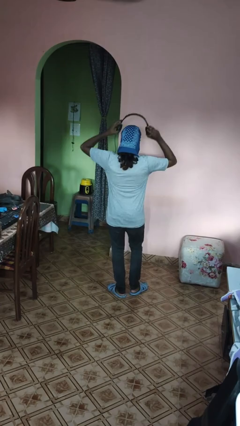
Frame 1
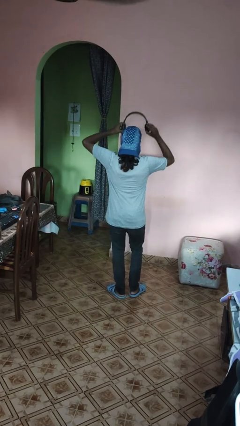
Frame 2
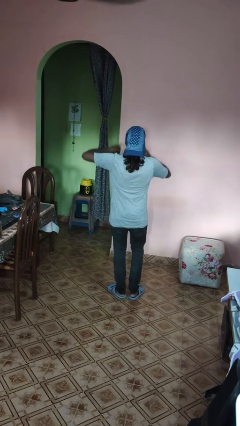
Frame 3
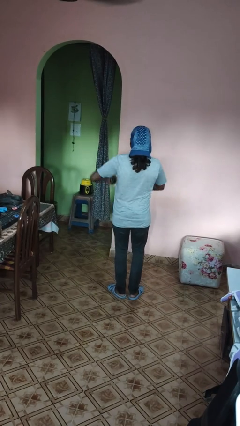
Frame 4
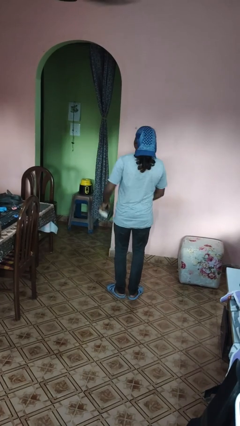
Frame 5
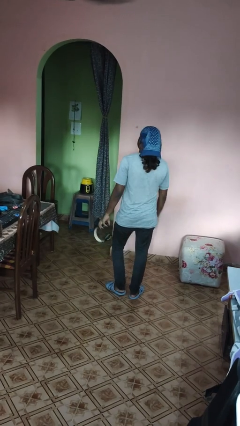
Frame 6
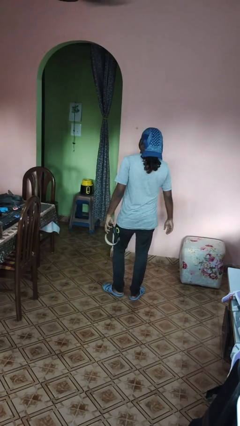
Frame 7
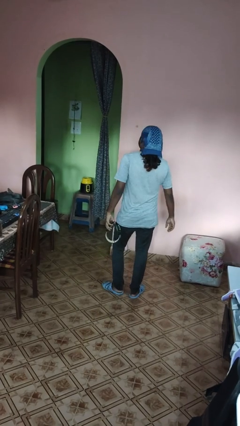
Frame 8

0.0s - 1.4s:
person takes off headphones

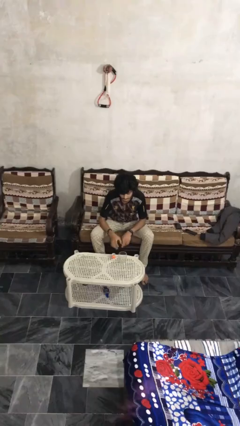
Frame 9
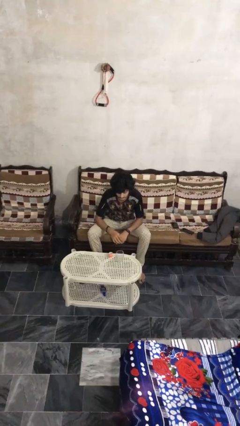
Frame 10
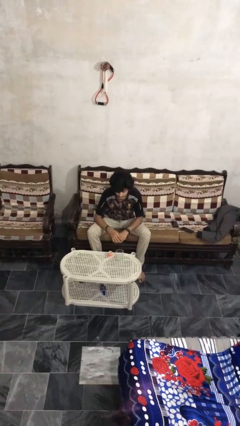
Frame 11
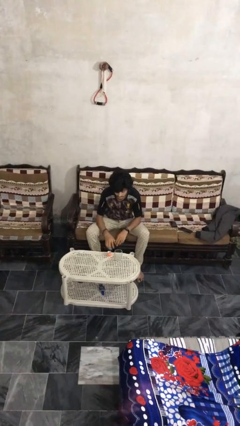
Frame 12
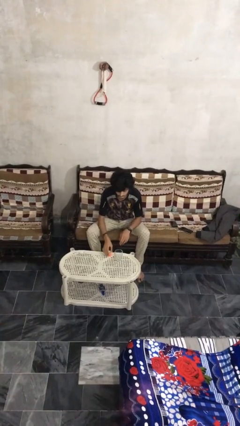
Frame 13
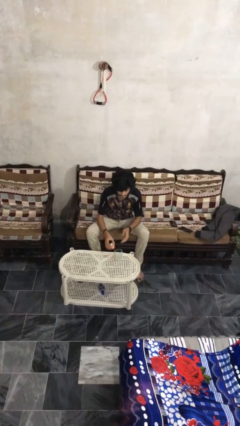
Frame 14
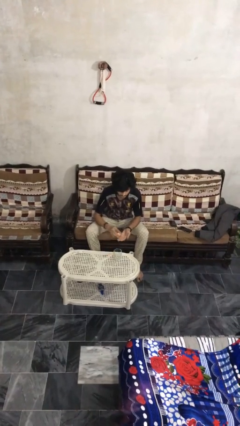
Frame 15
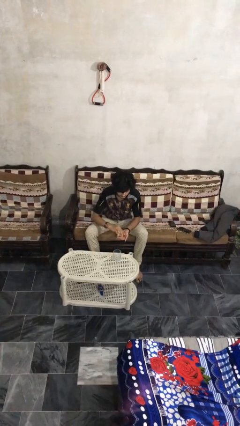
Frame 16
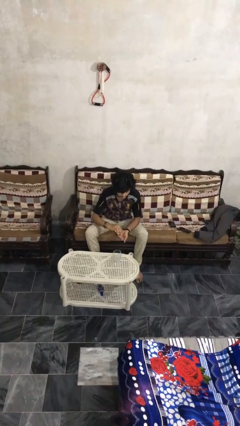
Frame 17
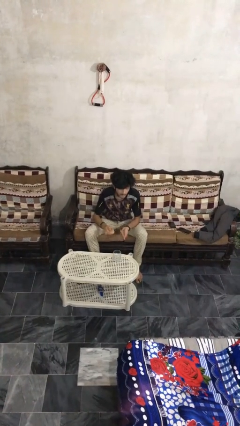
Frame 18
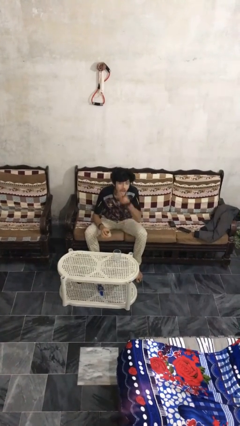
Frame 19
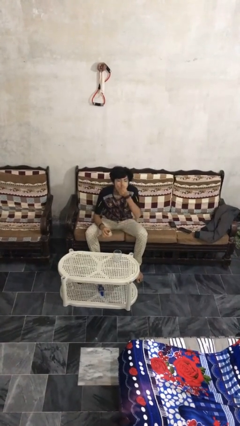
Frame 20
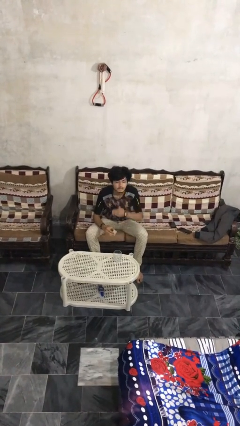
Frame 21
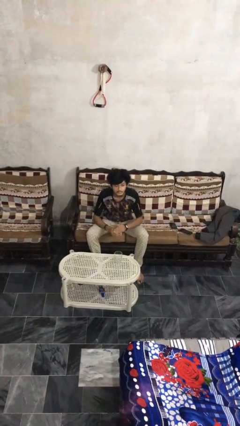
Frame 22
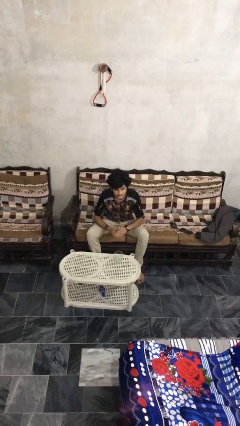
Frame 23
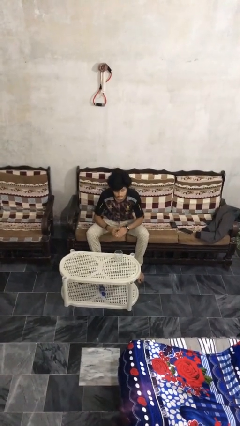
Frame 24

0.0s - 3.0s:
person takes medicine pills

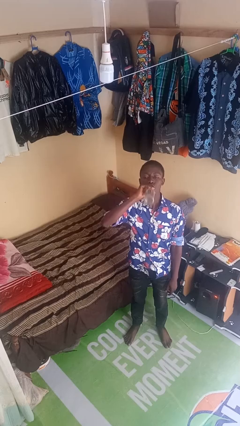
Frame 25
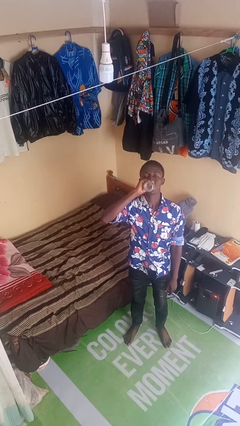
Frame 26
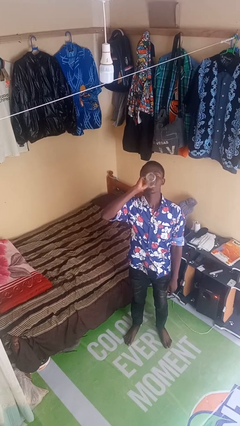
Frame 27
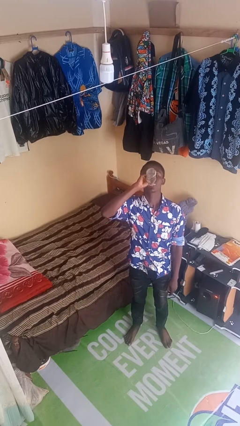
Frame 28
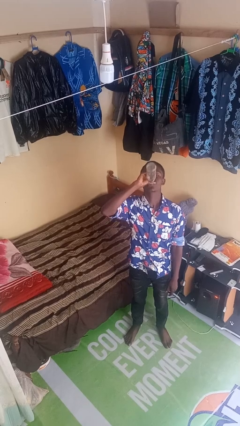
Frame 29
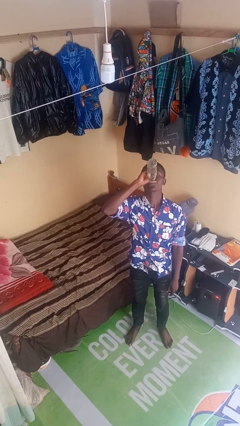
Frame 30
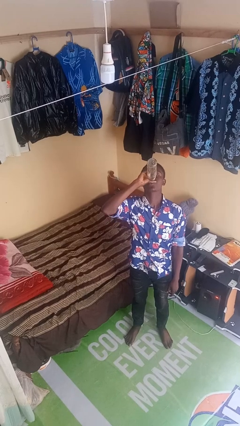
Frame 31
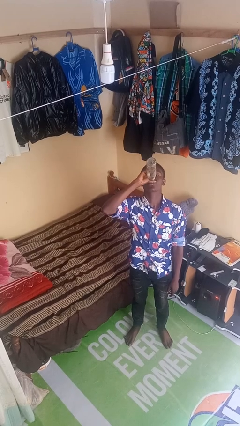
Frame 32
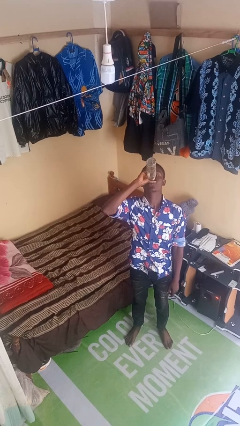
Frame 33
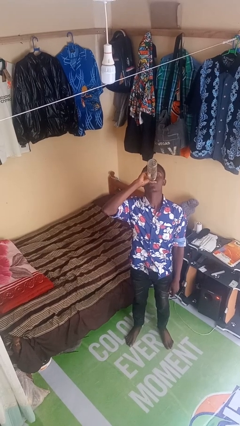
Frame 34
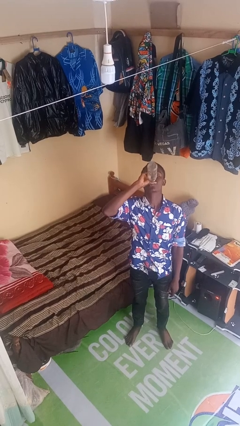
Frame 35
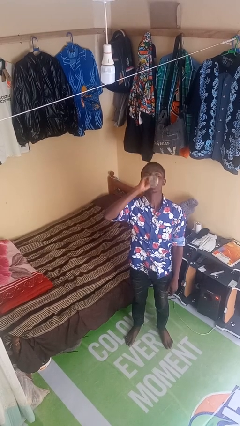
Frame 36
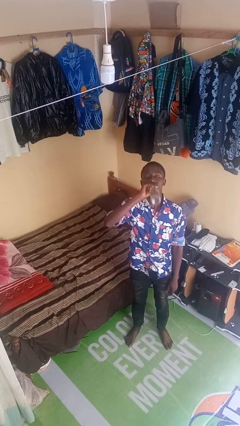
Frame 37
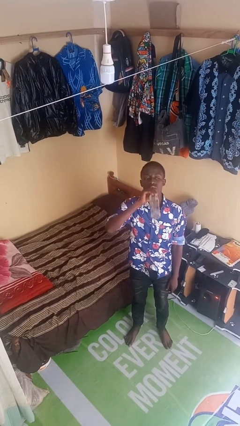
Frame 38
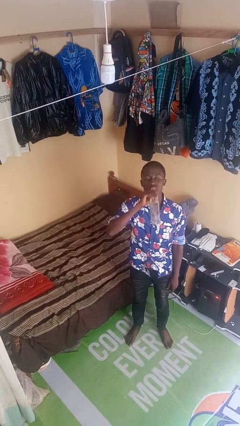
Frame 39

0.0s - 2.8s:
person drinks from bottle

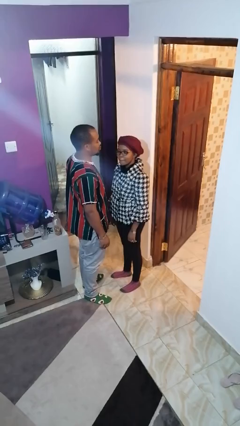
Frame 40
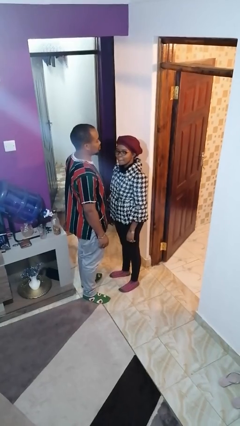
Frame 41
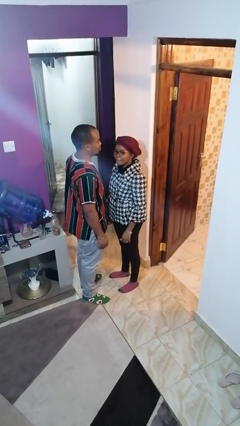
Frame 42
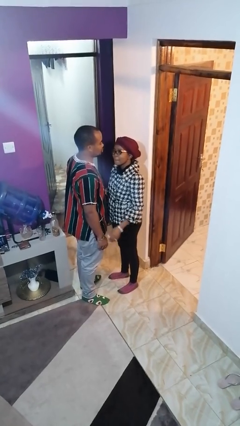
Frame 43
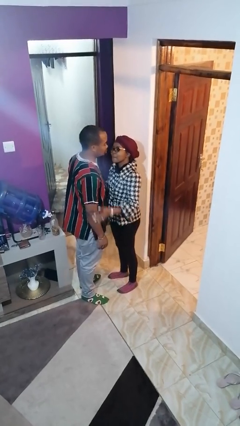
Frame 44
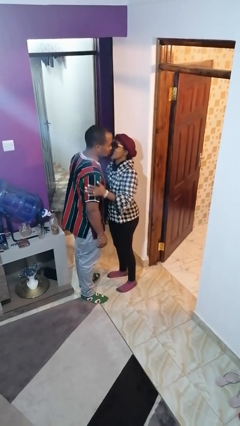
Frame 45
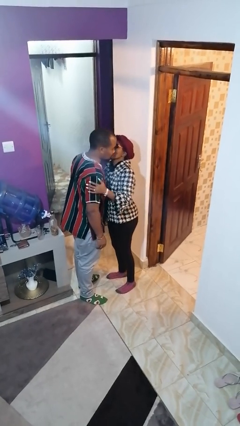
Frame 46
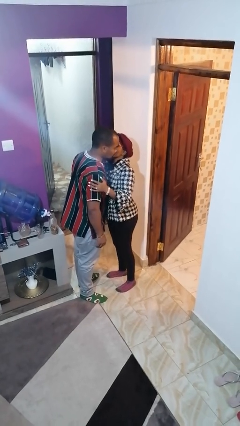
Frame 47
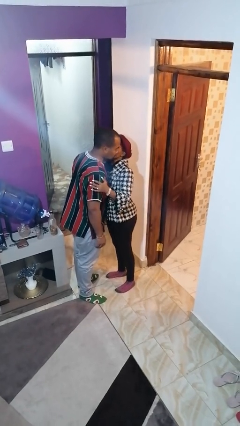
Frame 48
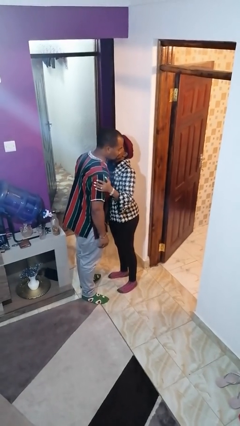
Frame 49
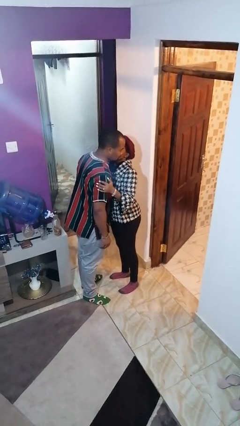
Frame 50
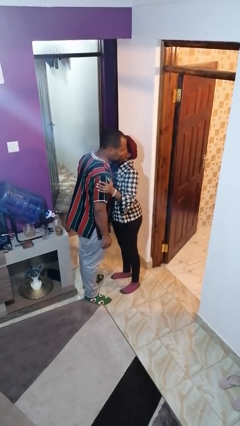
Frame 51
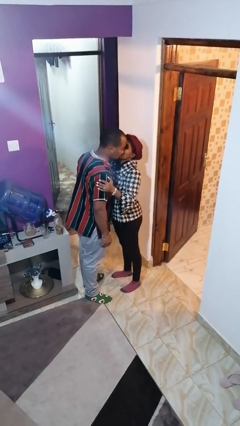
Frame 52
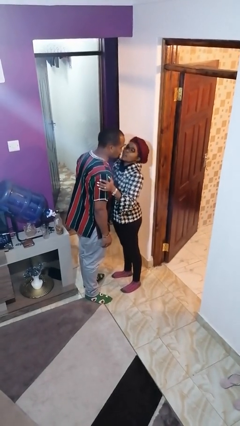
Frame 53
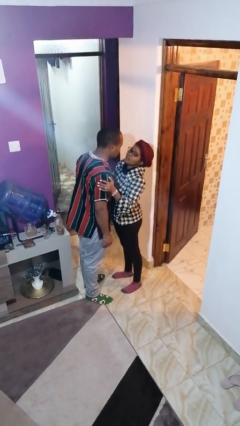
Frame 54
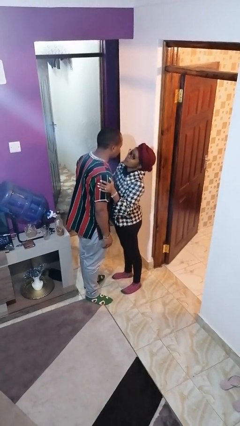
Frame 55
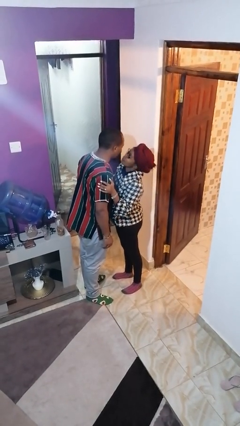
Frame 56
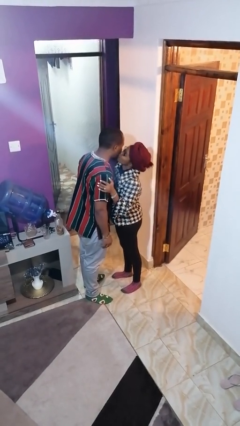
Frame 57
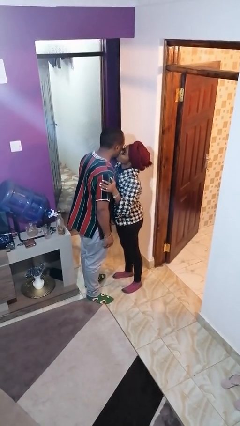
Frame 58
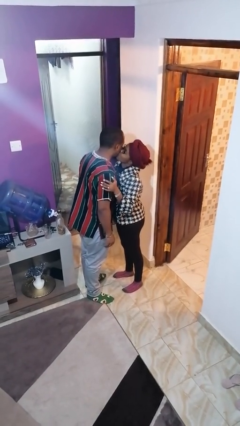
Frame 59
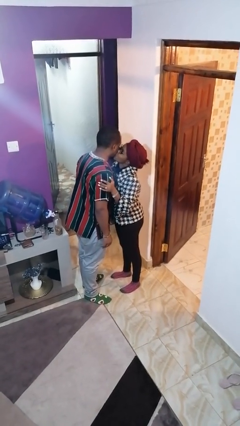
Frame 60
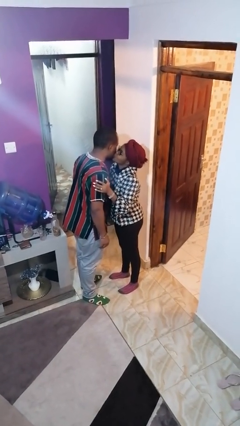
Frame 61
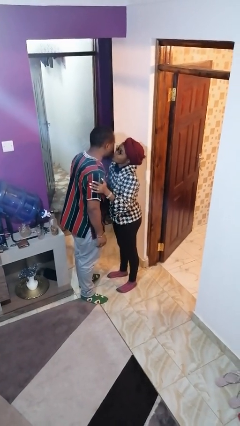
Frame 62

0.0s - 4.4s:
person kisses cheek of person

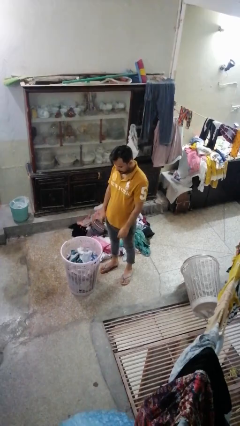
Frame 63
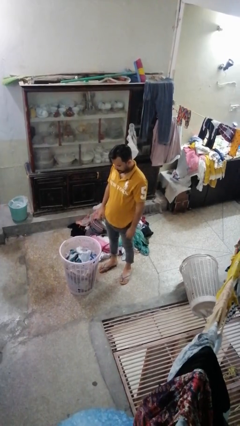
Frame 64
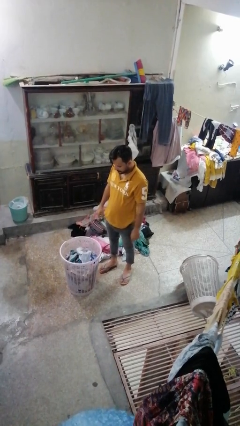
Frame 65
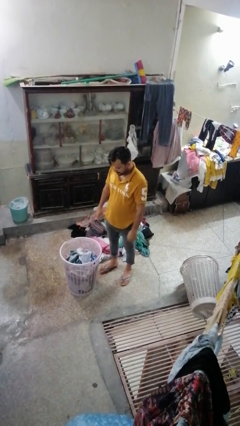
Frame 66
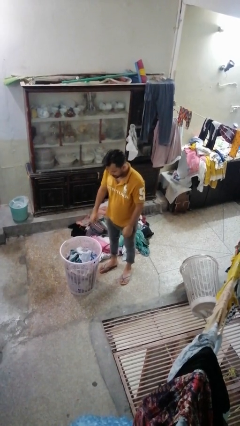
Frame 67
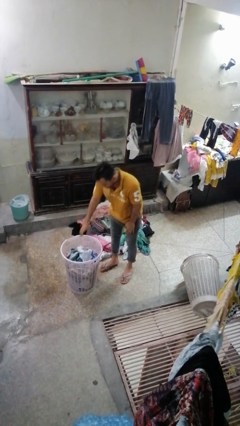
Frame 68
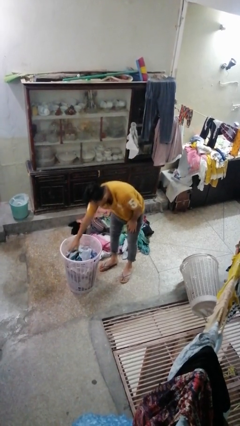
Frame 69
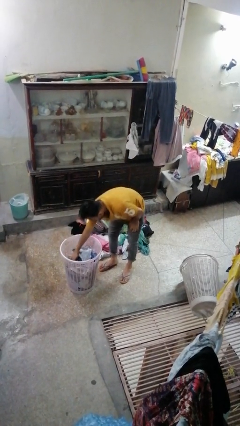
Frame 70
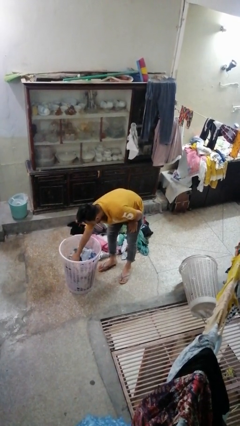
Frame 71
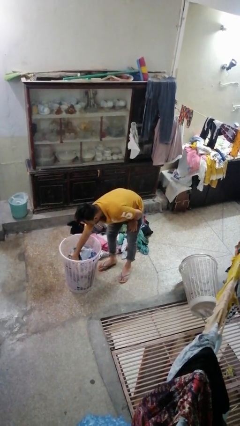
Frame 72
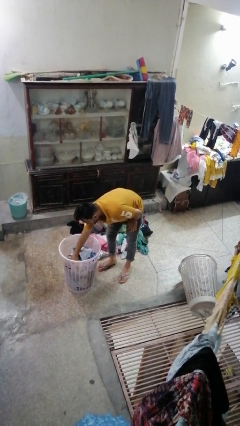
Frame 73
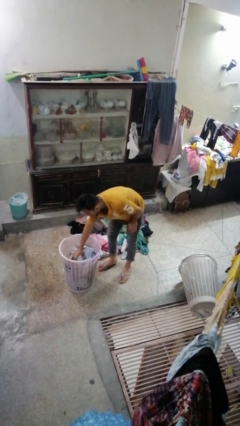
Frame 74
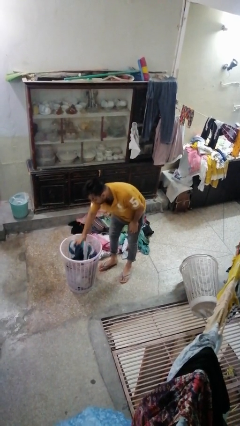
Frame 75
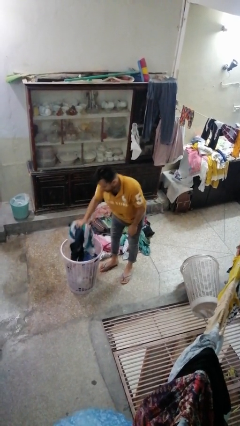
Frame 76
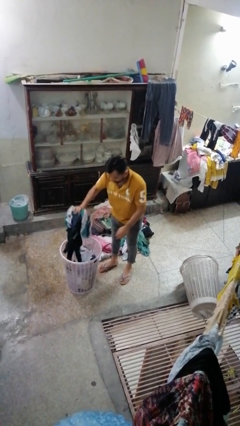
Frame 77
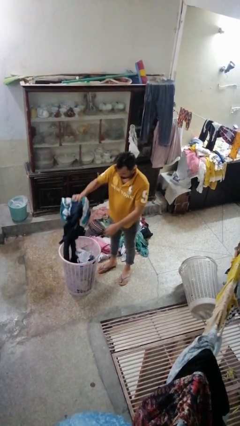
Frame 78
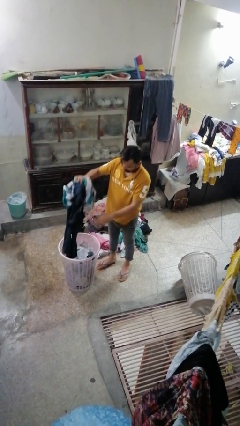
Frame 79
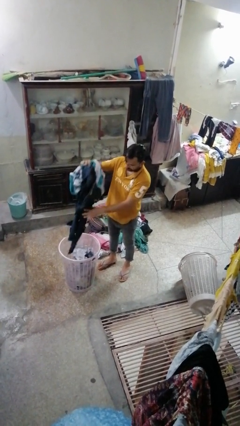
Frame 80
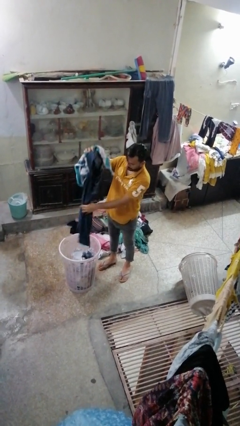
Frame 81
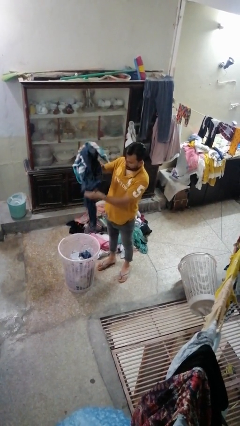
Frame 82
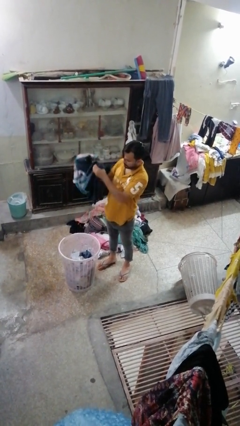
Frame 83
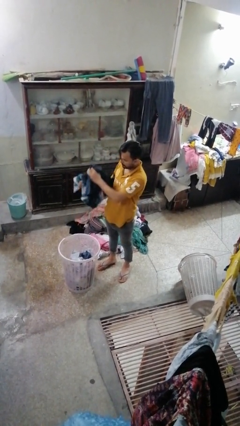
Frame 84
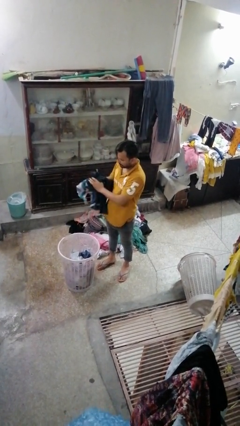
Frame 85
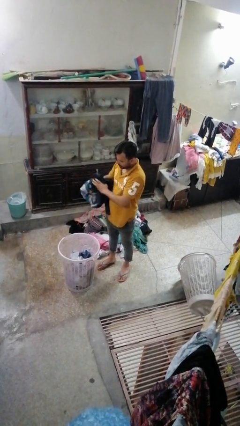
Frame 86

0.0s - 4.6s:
person takes object from basket

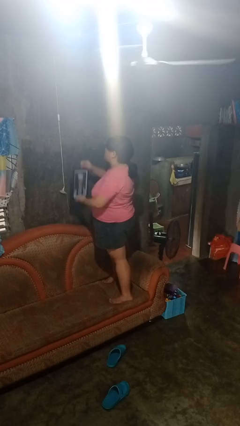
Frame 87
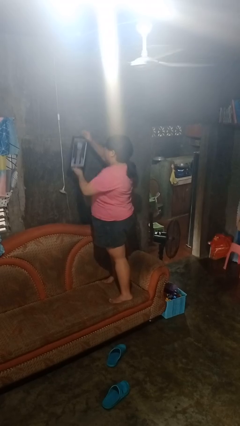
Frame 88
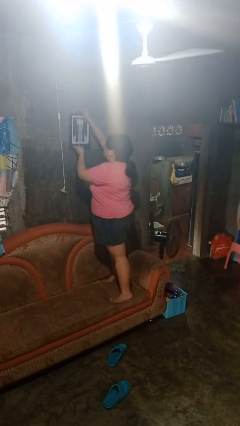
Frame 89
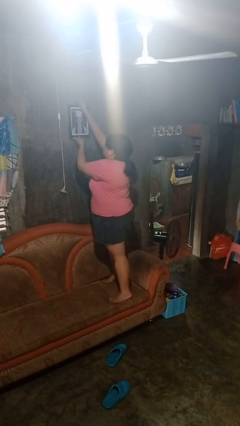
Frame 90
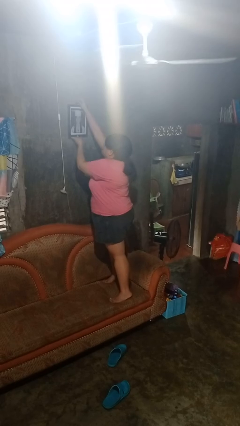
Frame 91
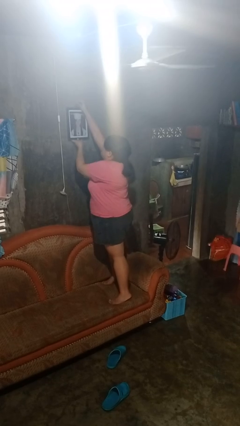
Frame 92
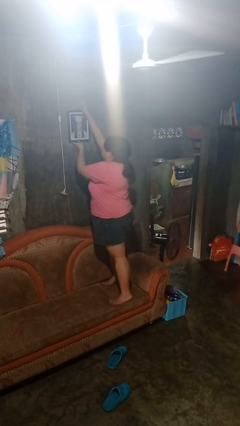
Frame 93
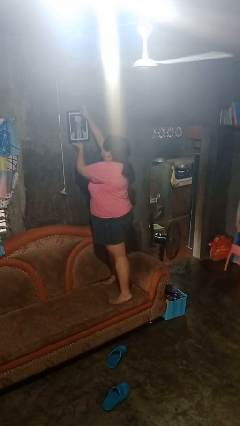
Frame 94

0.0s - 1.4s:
person puts up picture frame

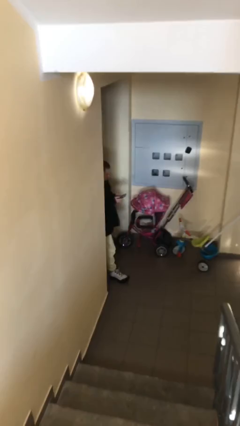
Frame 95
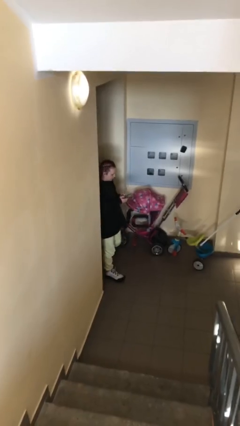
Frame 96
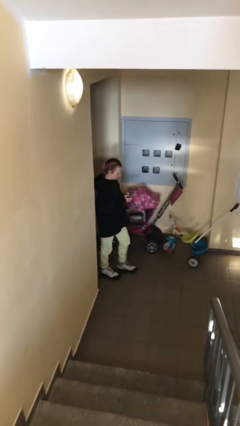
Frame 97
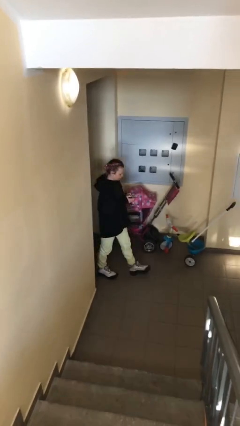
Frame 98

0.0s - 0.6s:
person enters scene through structure
